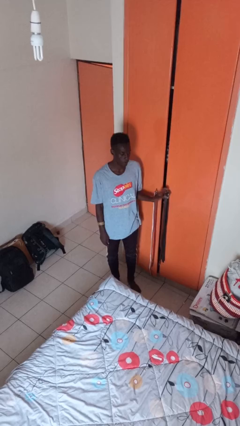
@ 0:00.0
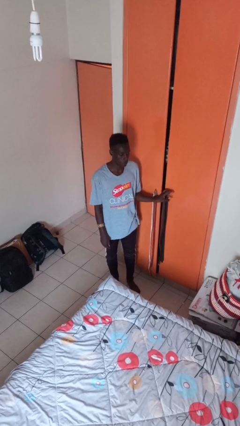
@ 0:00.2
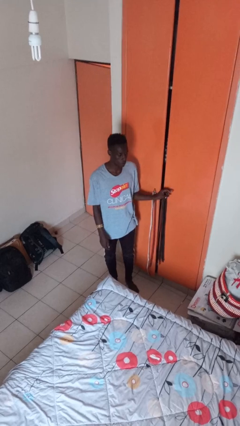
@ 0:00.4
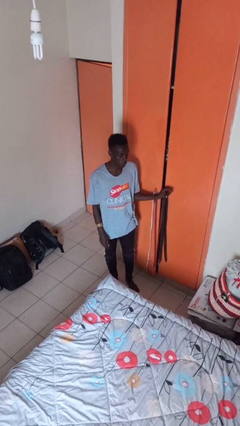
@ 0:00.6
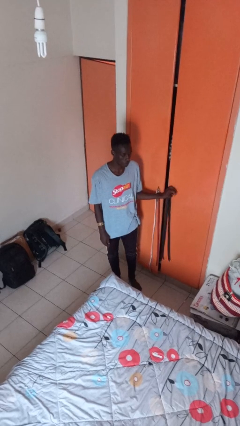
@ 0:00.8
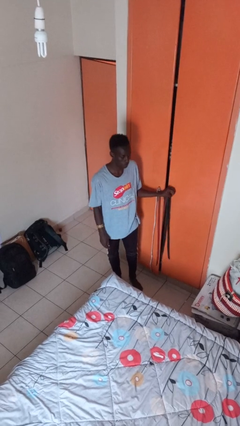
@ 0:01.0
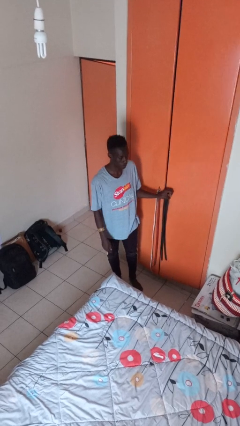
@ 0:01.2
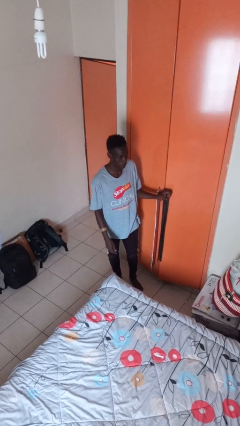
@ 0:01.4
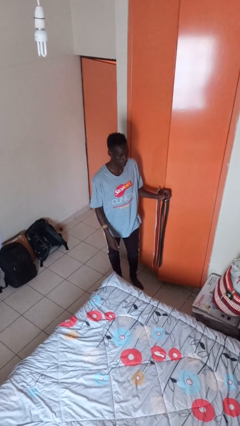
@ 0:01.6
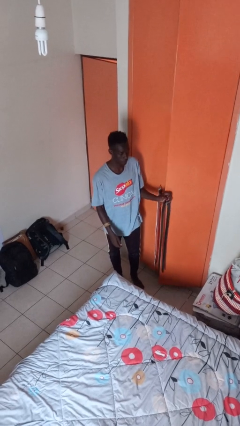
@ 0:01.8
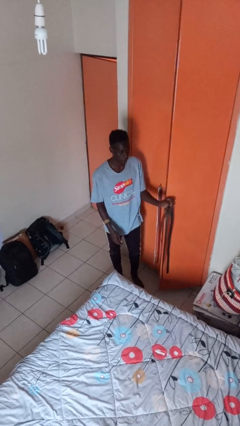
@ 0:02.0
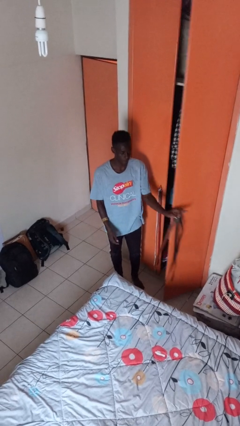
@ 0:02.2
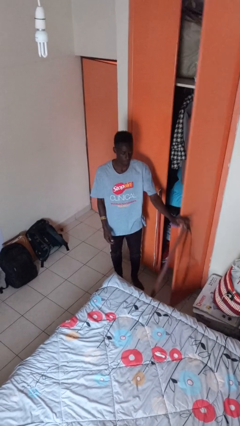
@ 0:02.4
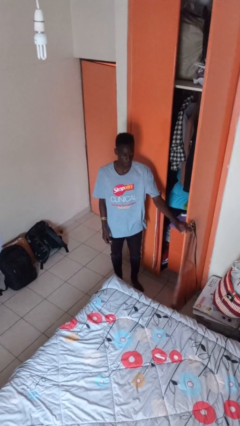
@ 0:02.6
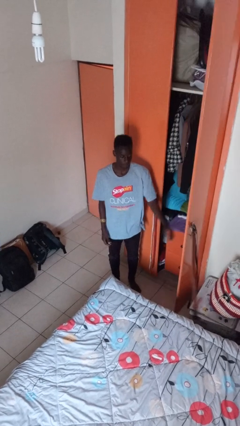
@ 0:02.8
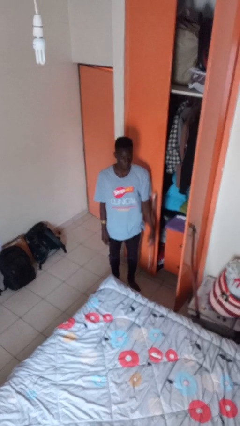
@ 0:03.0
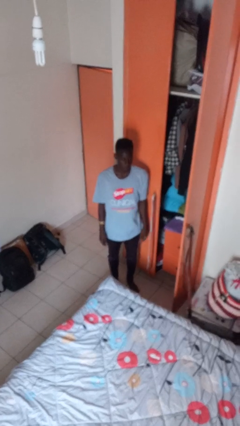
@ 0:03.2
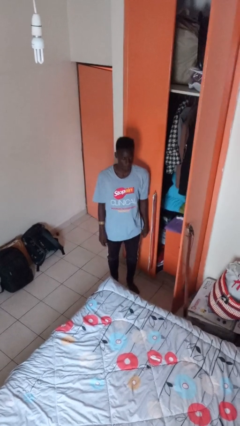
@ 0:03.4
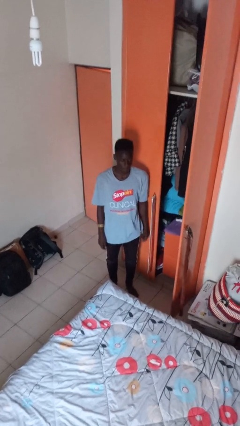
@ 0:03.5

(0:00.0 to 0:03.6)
person opens closet door

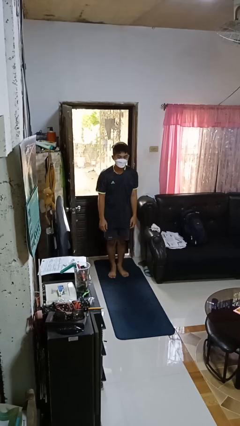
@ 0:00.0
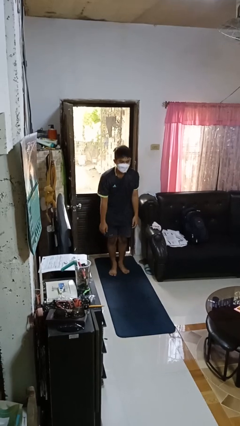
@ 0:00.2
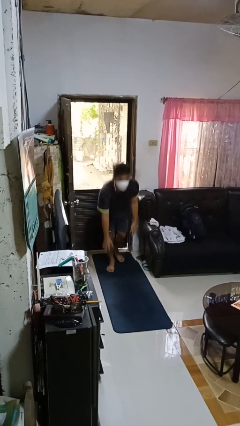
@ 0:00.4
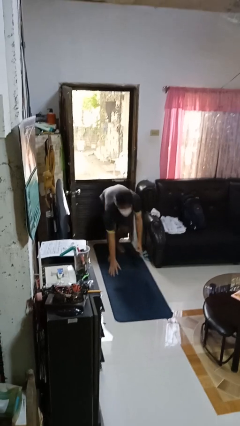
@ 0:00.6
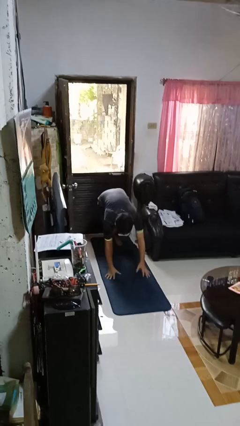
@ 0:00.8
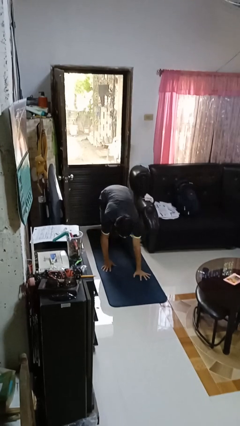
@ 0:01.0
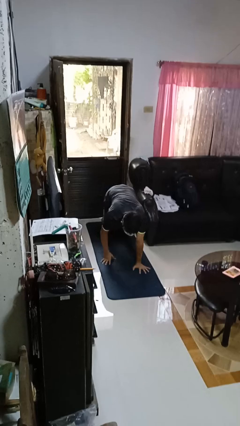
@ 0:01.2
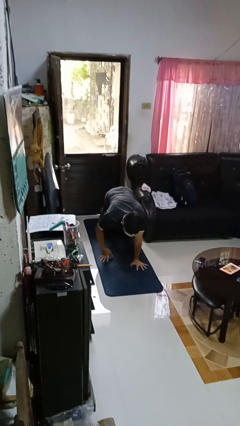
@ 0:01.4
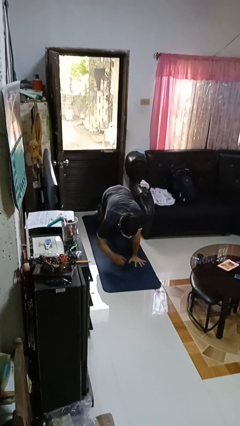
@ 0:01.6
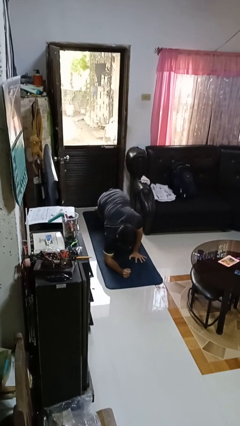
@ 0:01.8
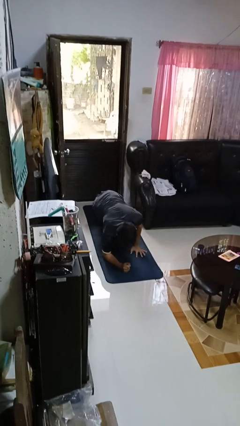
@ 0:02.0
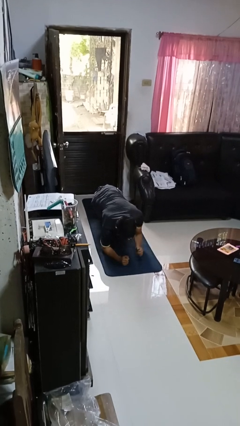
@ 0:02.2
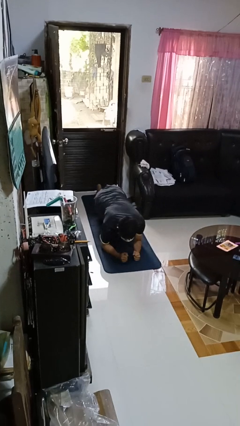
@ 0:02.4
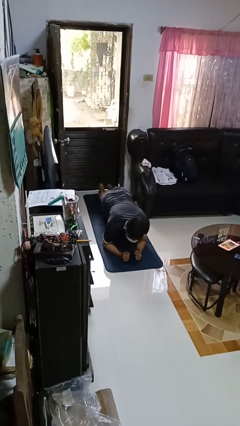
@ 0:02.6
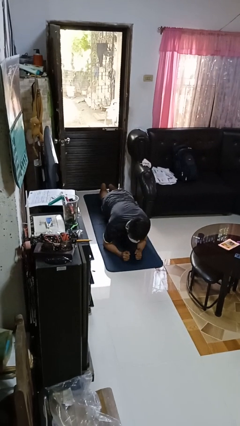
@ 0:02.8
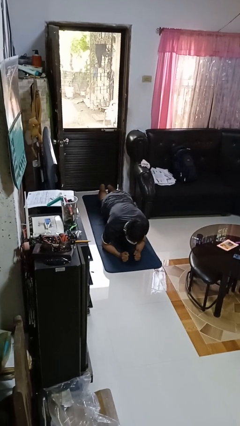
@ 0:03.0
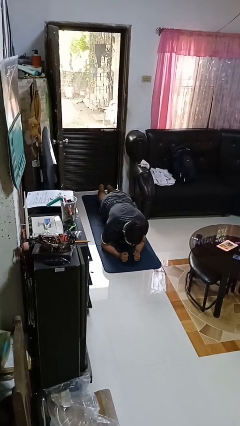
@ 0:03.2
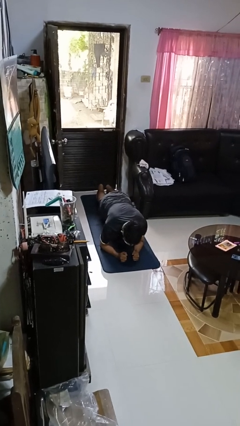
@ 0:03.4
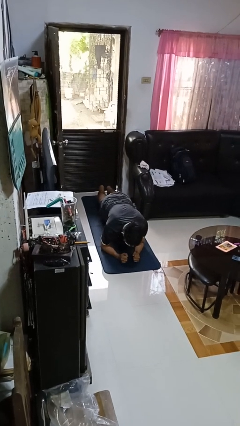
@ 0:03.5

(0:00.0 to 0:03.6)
person exercises with plank

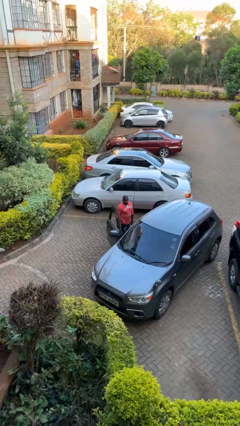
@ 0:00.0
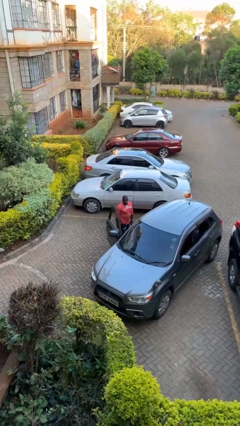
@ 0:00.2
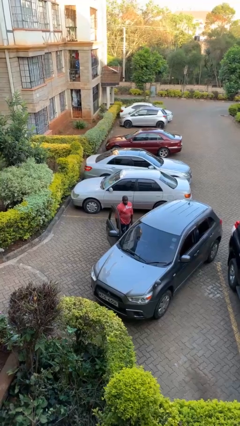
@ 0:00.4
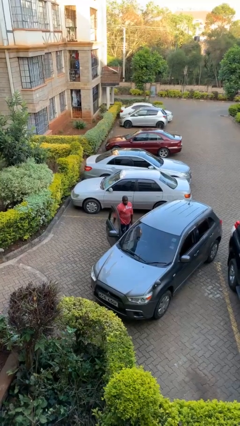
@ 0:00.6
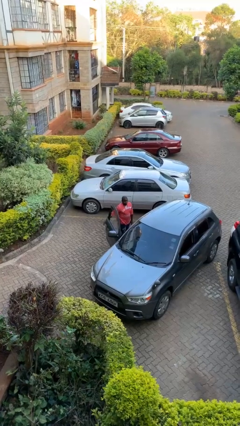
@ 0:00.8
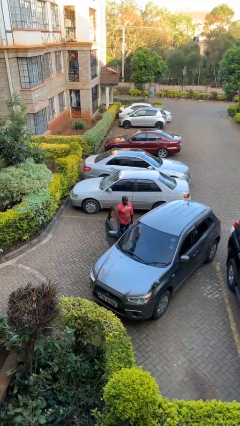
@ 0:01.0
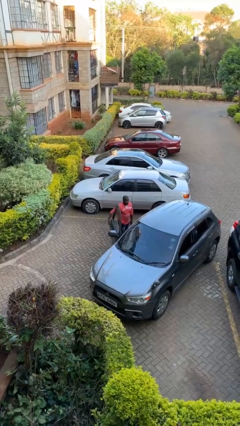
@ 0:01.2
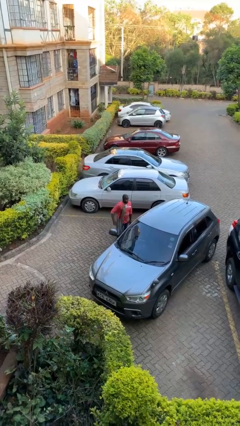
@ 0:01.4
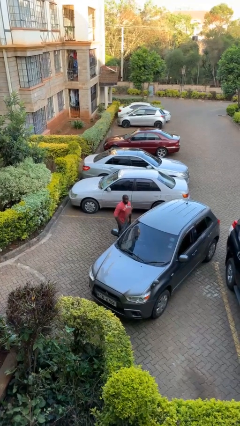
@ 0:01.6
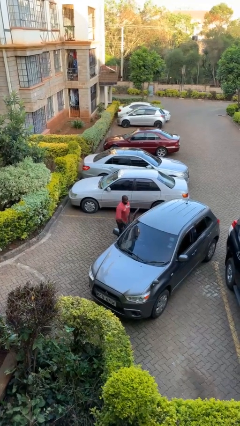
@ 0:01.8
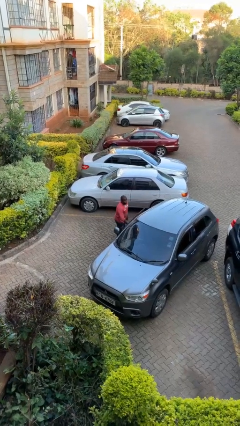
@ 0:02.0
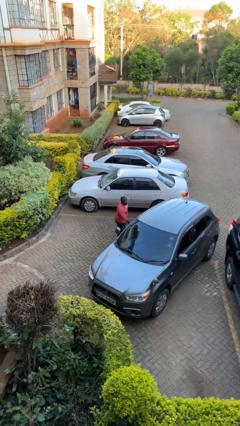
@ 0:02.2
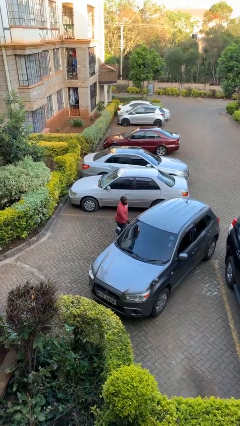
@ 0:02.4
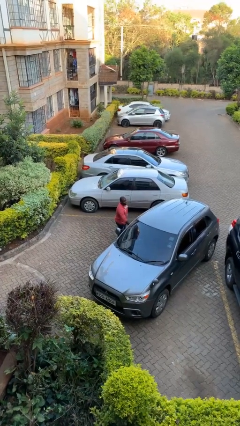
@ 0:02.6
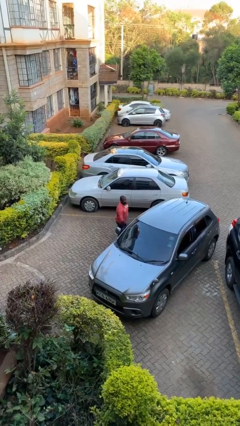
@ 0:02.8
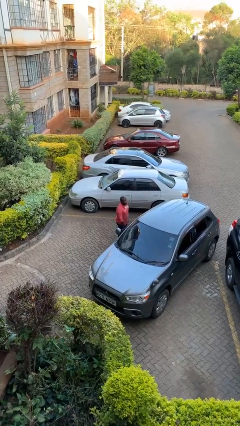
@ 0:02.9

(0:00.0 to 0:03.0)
person closes car door

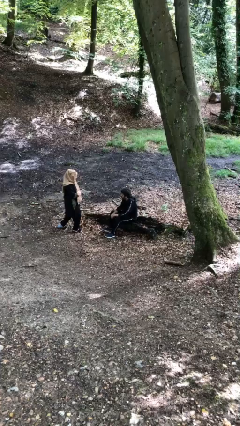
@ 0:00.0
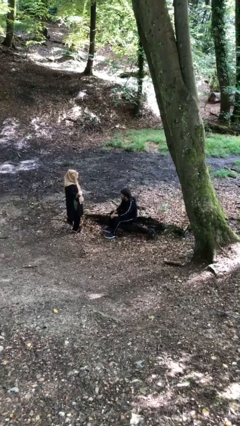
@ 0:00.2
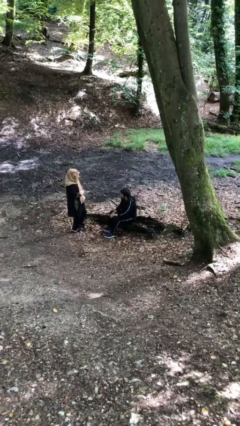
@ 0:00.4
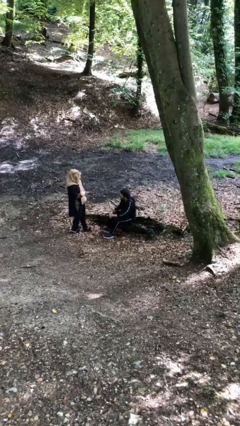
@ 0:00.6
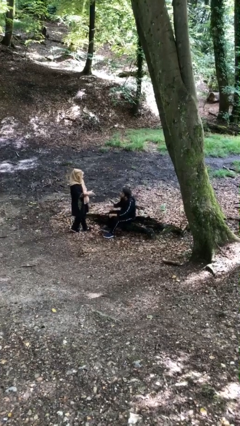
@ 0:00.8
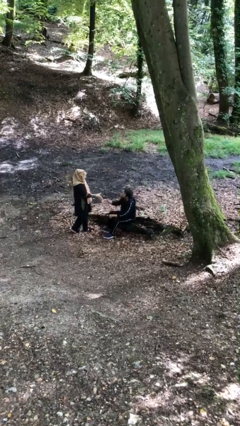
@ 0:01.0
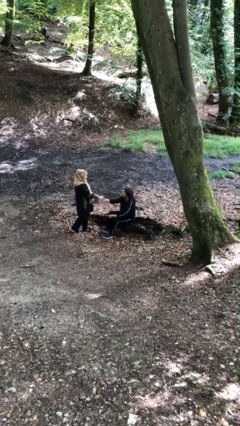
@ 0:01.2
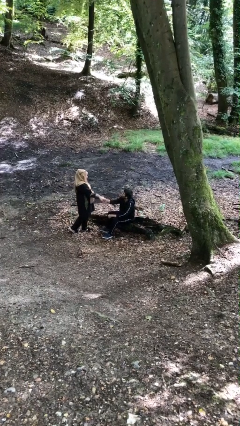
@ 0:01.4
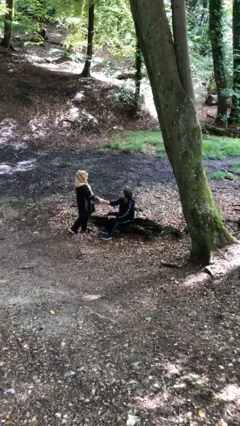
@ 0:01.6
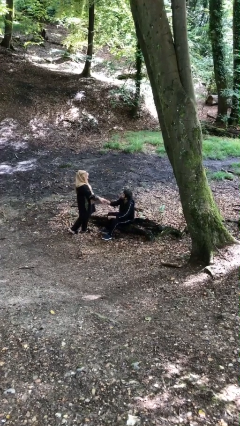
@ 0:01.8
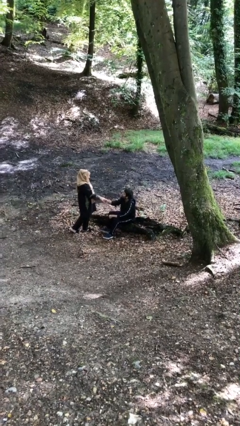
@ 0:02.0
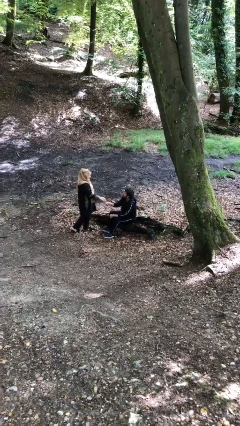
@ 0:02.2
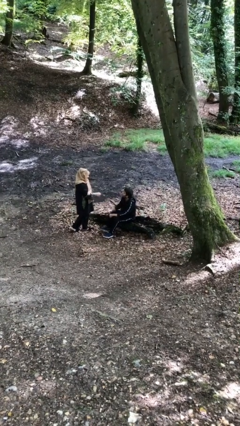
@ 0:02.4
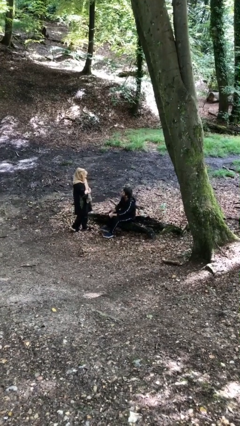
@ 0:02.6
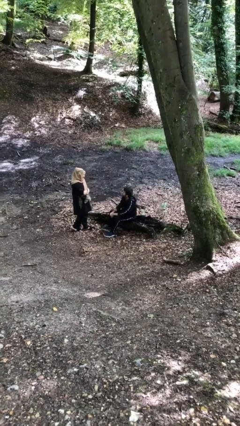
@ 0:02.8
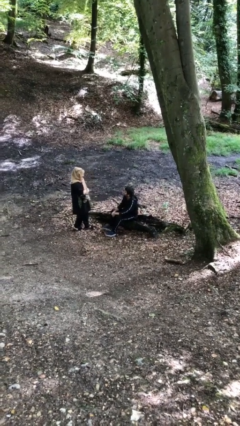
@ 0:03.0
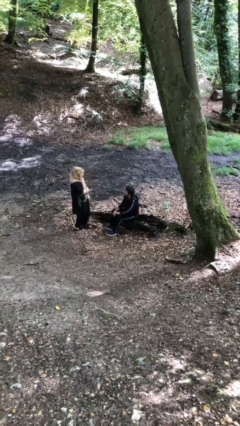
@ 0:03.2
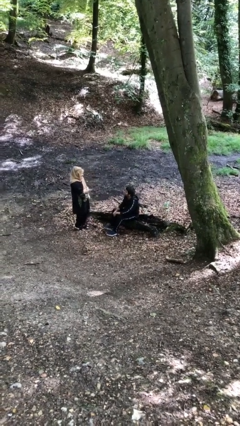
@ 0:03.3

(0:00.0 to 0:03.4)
person shakes hand

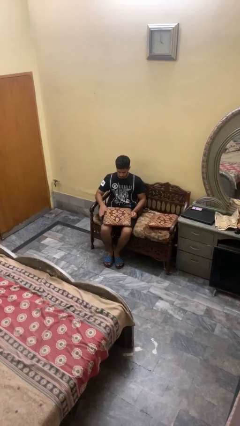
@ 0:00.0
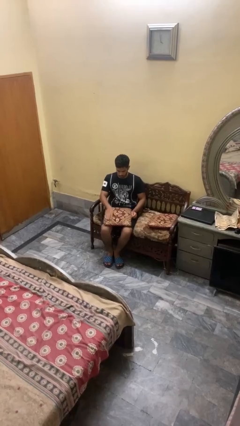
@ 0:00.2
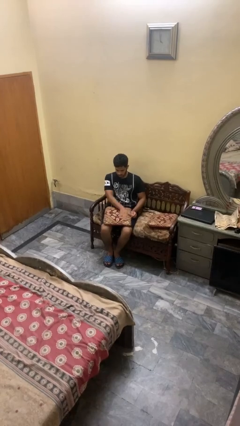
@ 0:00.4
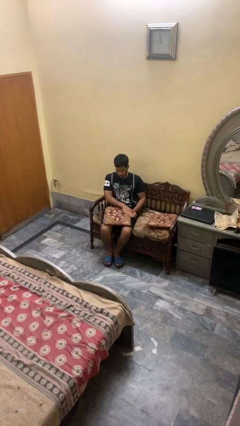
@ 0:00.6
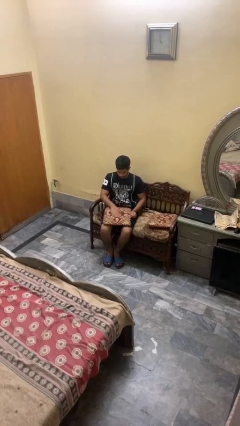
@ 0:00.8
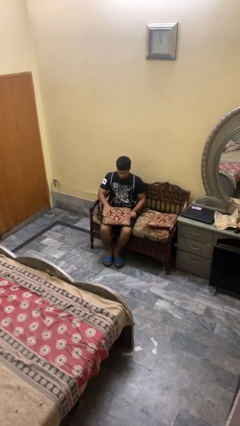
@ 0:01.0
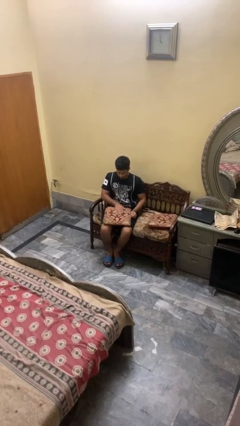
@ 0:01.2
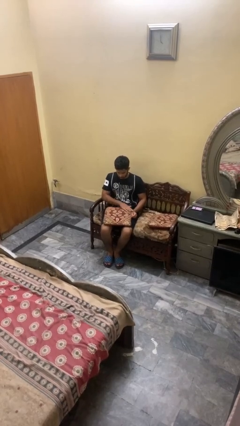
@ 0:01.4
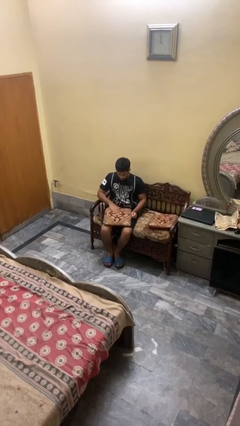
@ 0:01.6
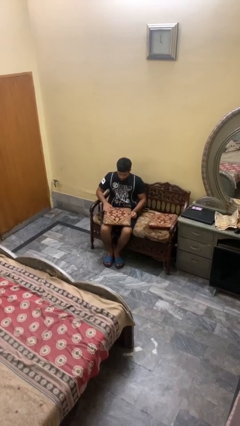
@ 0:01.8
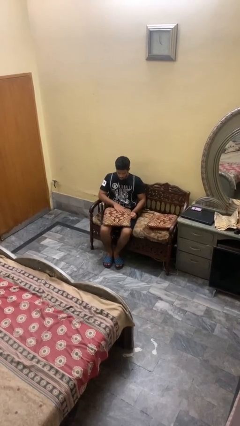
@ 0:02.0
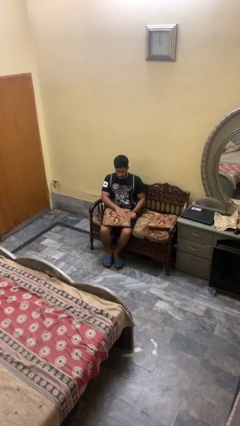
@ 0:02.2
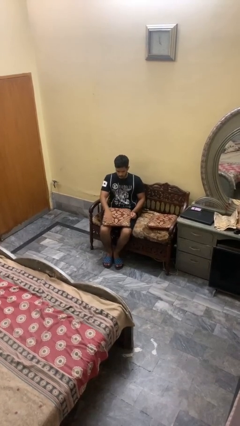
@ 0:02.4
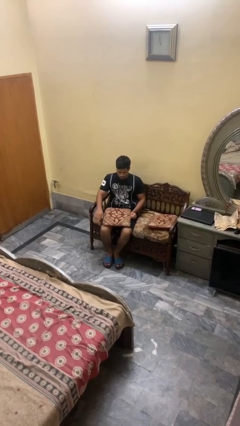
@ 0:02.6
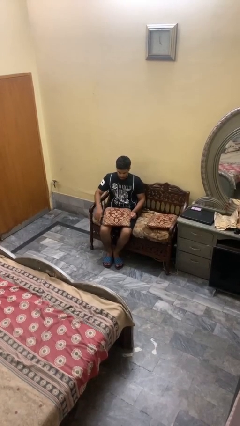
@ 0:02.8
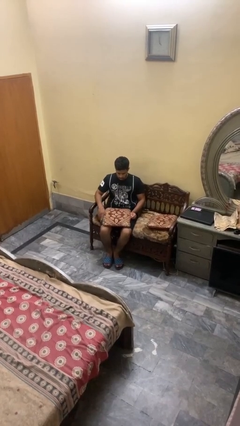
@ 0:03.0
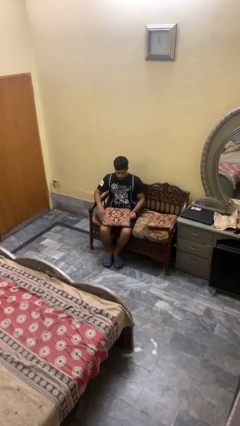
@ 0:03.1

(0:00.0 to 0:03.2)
person waves hand over object

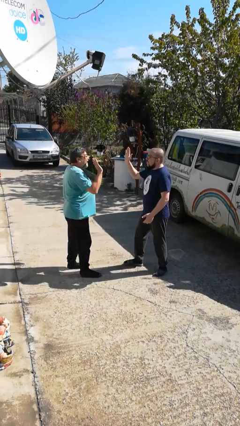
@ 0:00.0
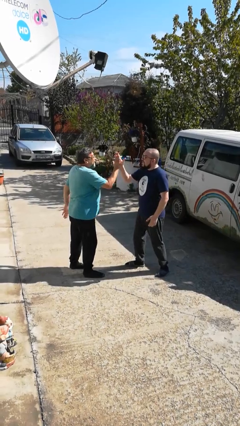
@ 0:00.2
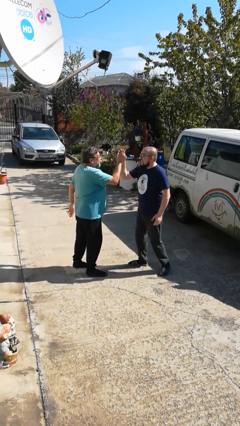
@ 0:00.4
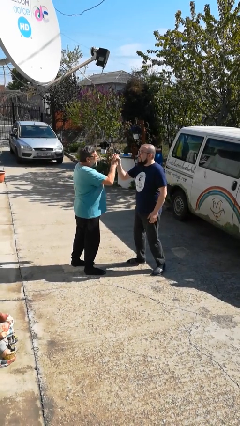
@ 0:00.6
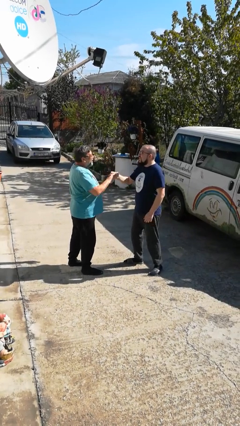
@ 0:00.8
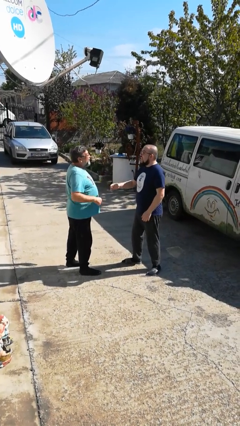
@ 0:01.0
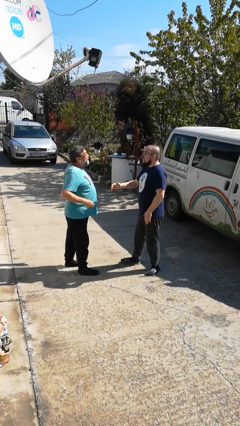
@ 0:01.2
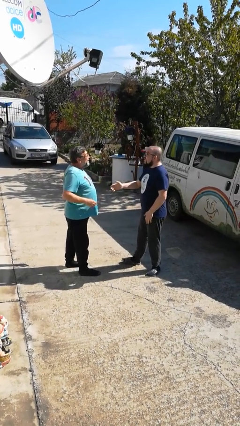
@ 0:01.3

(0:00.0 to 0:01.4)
person highfives hand
